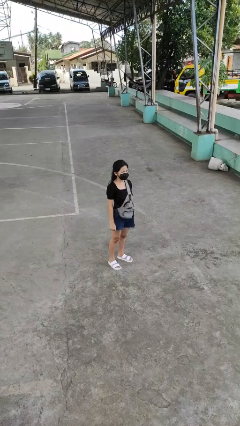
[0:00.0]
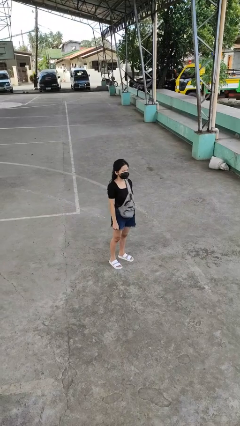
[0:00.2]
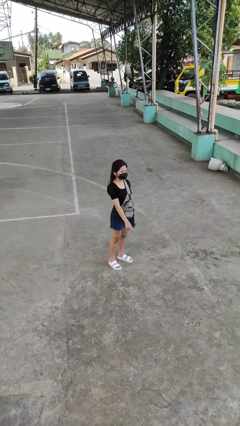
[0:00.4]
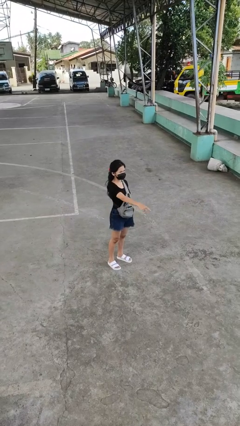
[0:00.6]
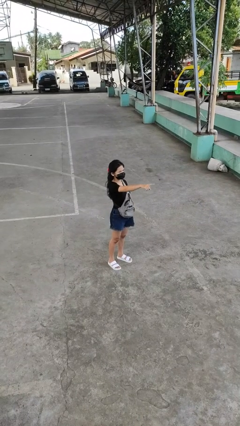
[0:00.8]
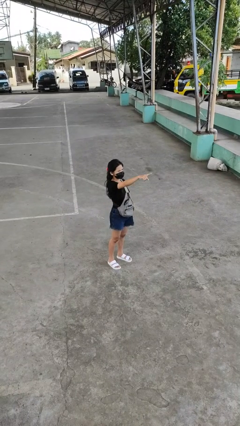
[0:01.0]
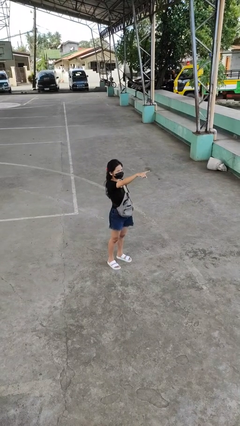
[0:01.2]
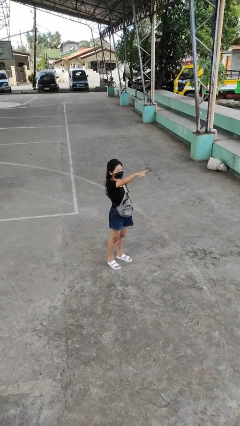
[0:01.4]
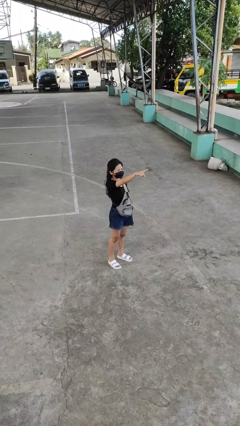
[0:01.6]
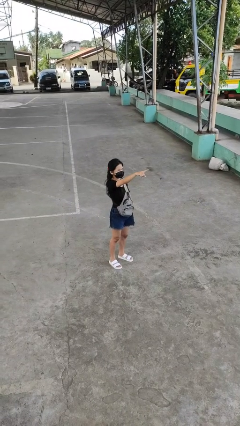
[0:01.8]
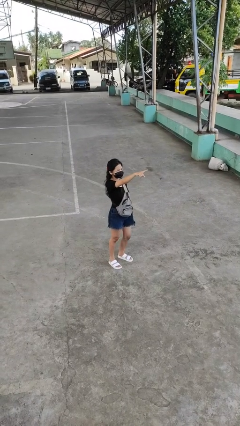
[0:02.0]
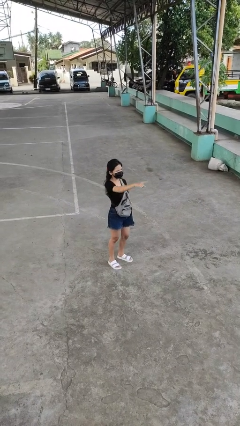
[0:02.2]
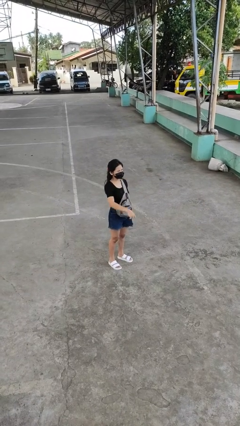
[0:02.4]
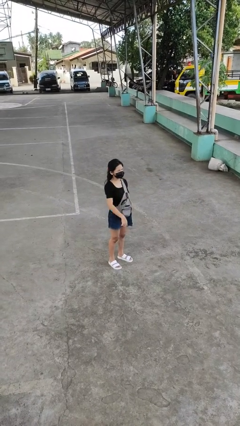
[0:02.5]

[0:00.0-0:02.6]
person points at person

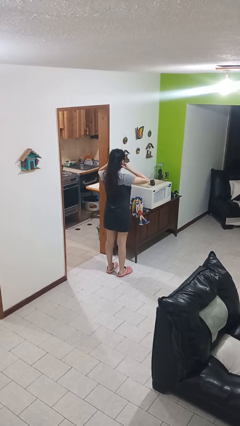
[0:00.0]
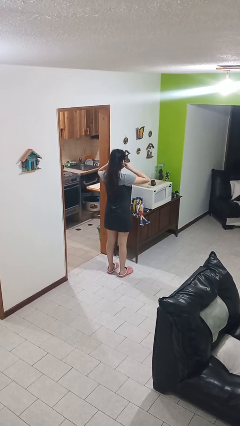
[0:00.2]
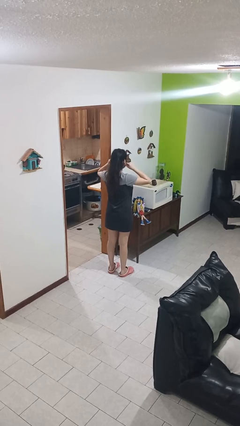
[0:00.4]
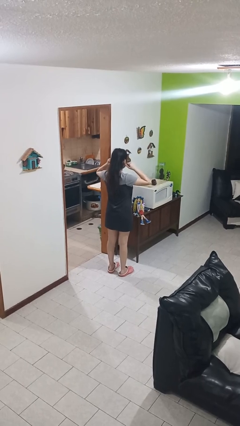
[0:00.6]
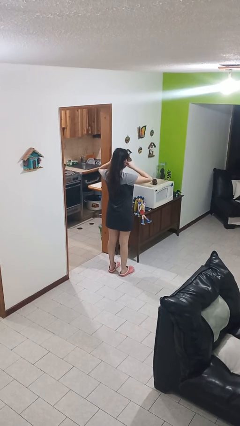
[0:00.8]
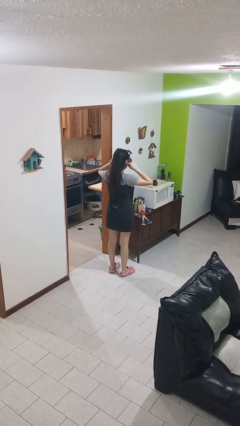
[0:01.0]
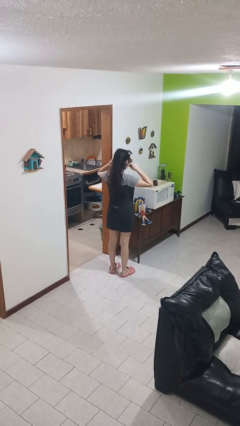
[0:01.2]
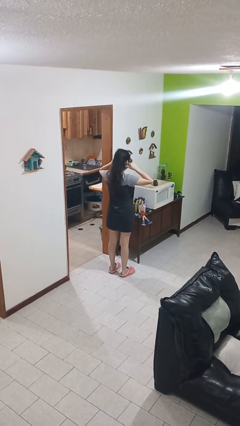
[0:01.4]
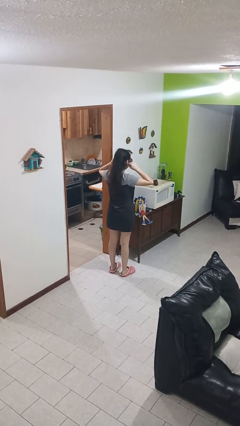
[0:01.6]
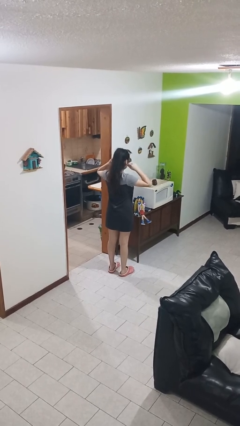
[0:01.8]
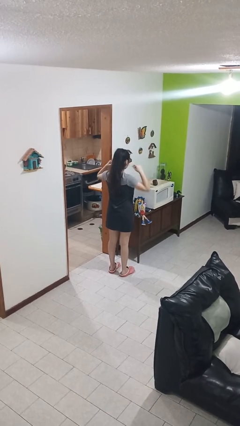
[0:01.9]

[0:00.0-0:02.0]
person touches earlobe

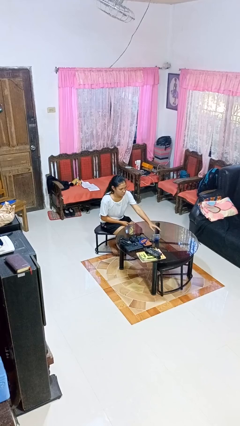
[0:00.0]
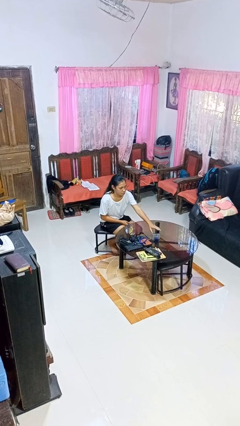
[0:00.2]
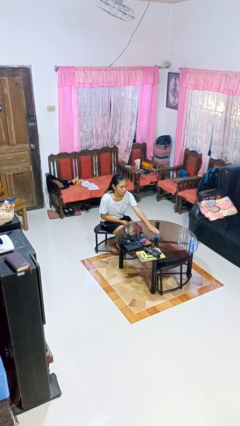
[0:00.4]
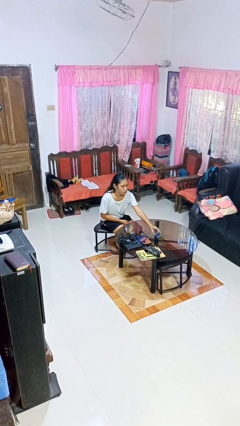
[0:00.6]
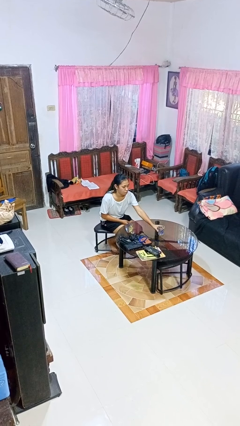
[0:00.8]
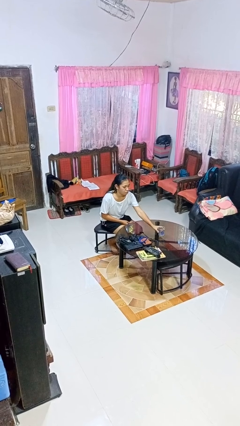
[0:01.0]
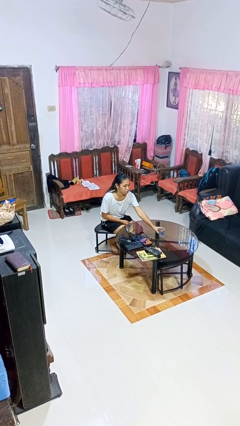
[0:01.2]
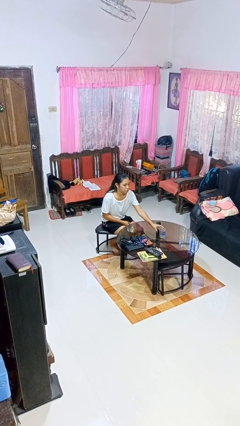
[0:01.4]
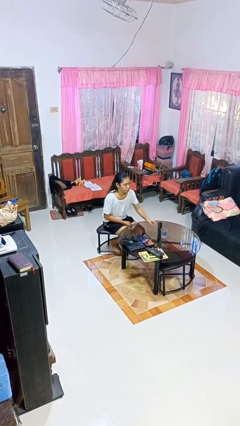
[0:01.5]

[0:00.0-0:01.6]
person sets upright glass

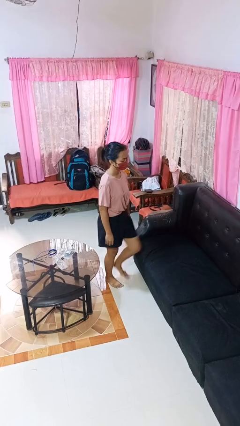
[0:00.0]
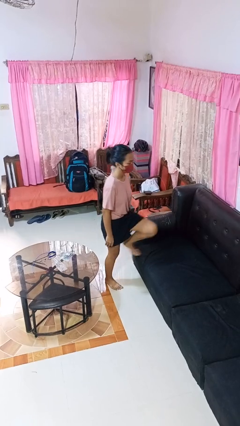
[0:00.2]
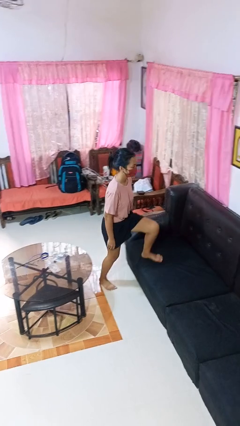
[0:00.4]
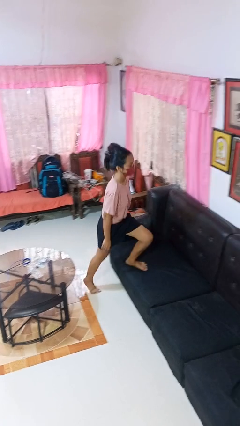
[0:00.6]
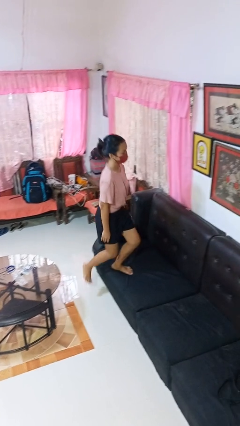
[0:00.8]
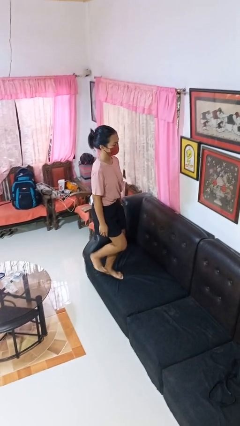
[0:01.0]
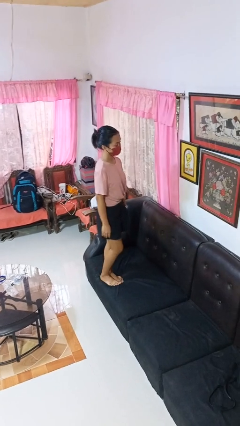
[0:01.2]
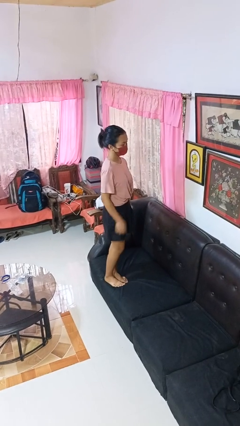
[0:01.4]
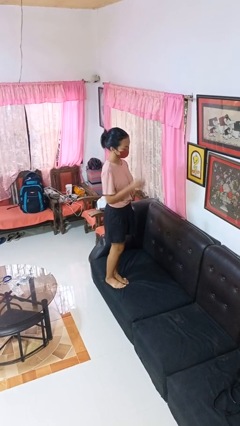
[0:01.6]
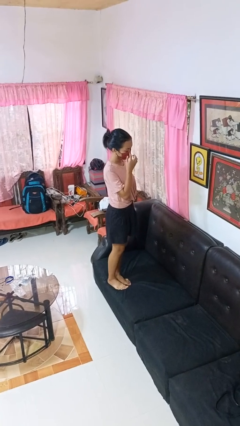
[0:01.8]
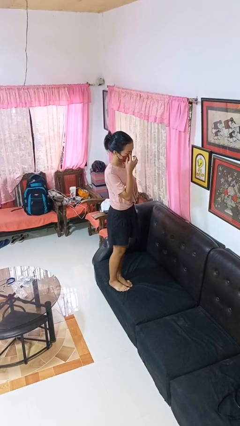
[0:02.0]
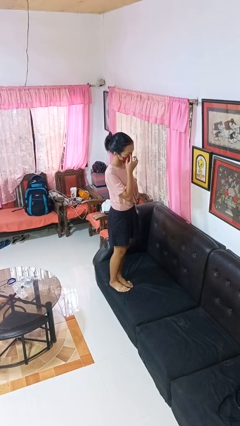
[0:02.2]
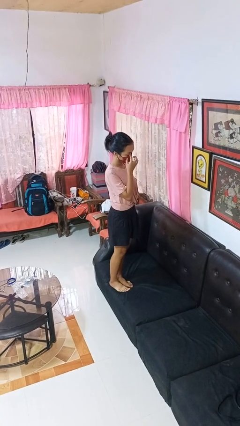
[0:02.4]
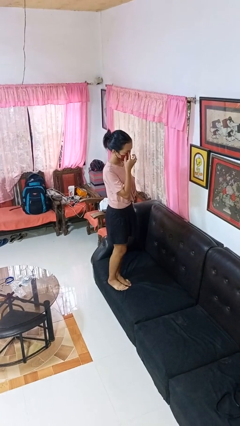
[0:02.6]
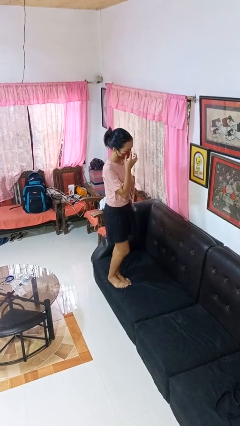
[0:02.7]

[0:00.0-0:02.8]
person climbs on couch

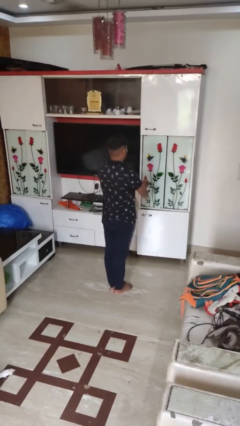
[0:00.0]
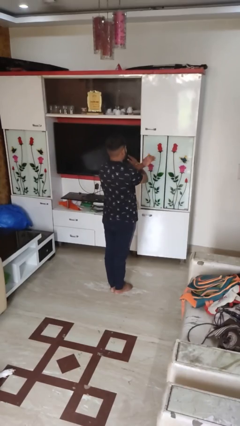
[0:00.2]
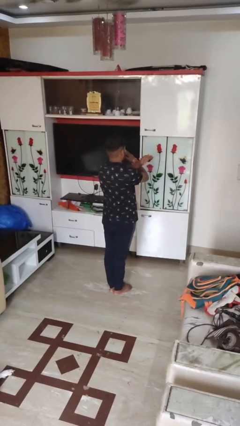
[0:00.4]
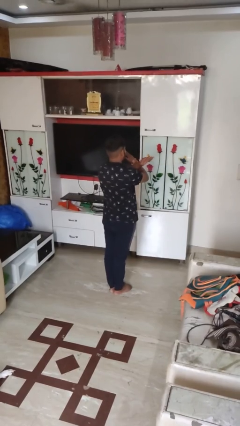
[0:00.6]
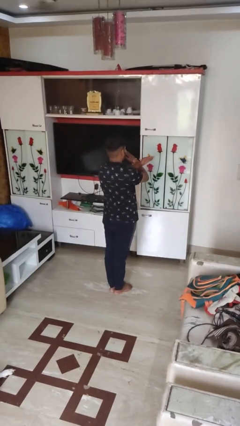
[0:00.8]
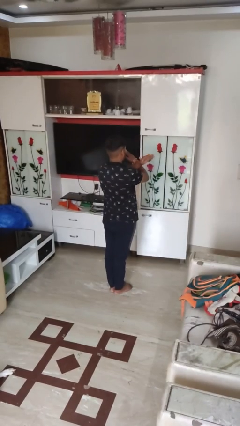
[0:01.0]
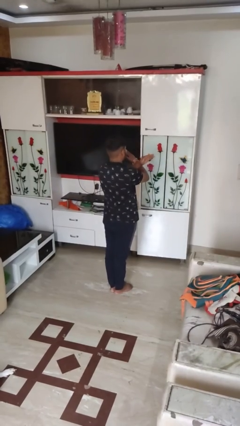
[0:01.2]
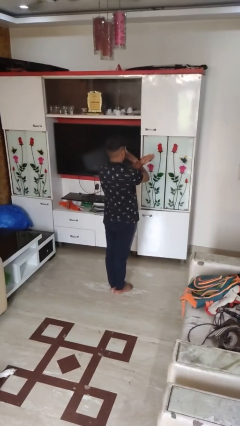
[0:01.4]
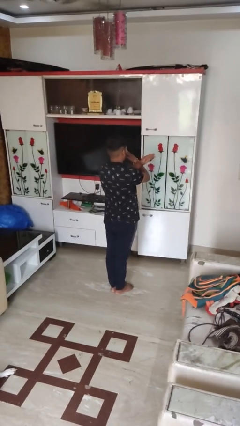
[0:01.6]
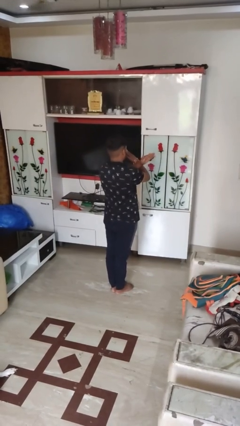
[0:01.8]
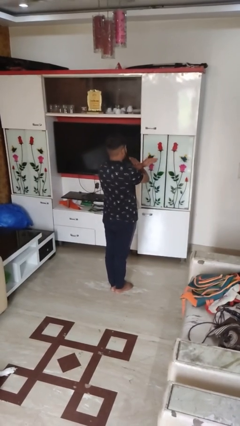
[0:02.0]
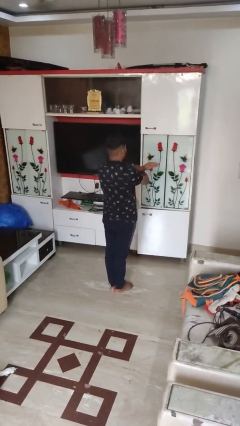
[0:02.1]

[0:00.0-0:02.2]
person gestures arms x

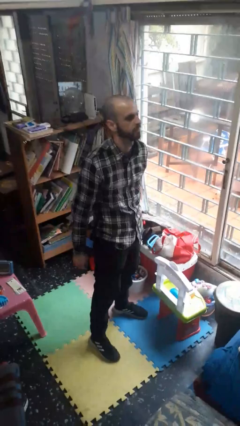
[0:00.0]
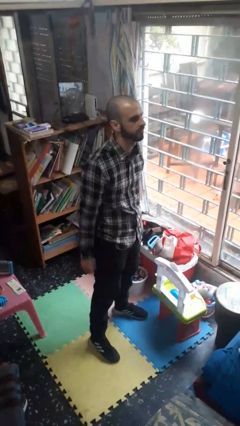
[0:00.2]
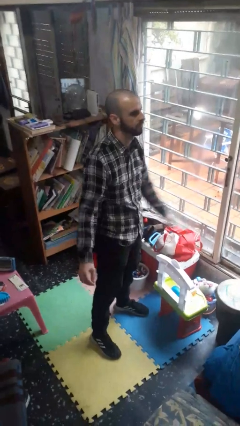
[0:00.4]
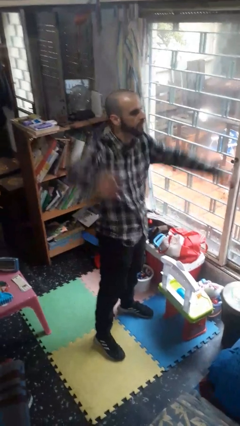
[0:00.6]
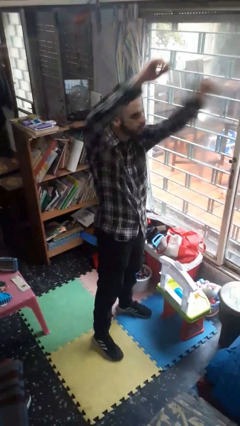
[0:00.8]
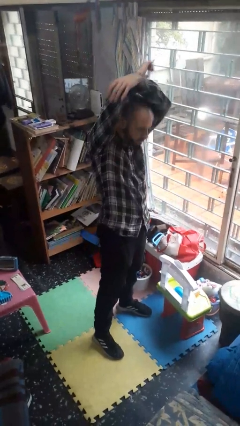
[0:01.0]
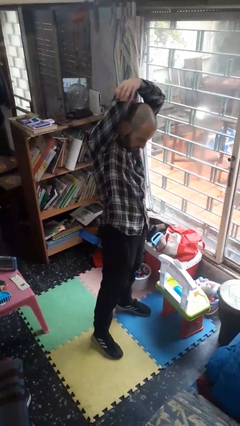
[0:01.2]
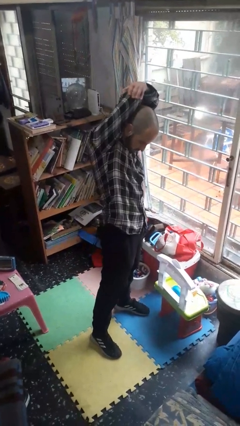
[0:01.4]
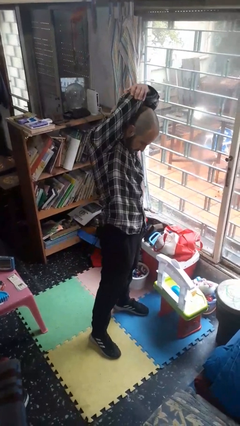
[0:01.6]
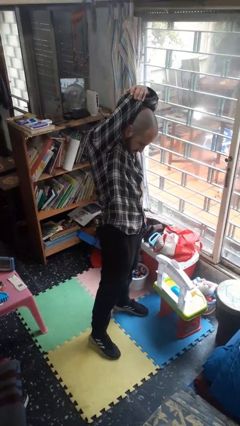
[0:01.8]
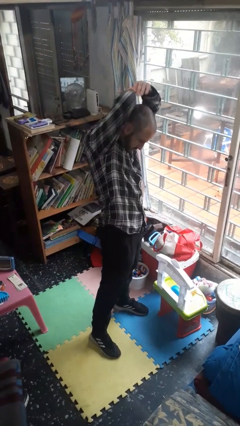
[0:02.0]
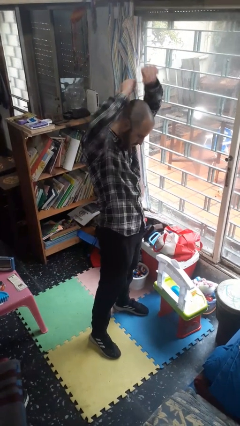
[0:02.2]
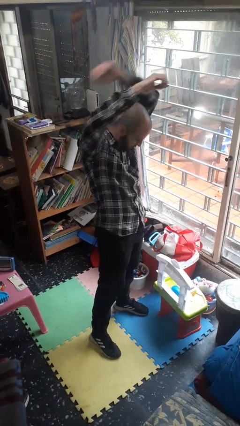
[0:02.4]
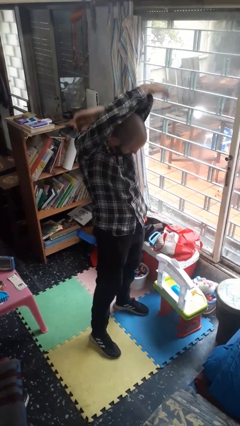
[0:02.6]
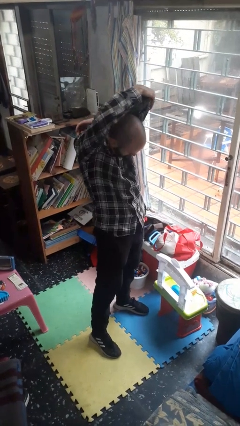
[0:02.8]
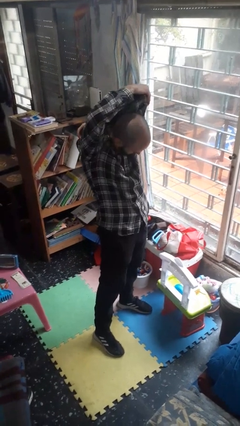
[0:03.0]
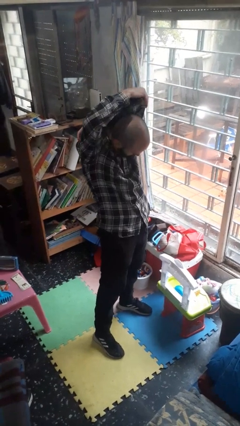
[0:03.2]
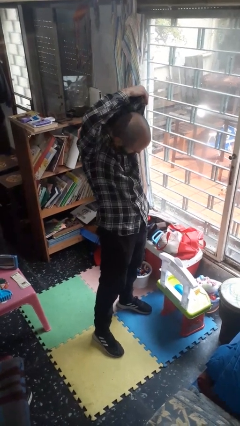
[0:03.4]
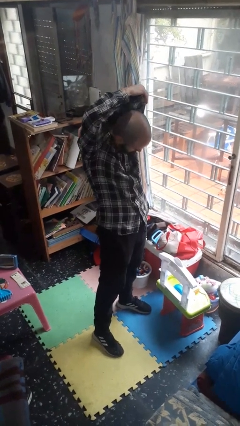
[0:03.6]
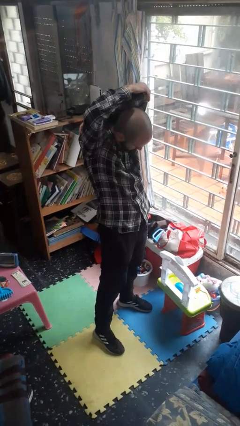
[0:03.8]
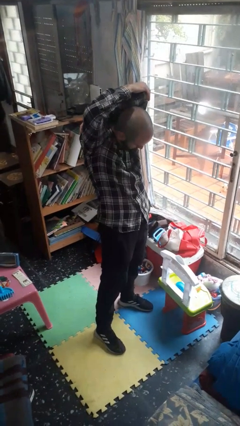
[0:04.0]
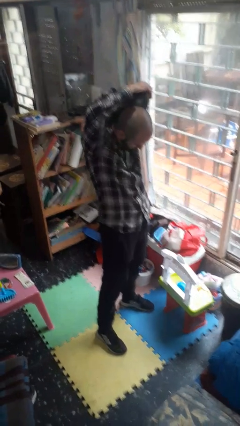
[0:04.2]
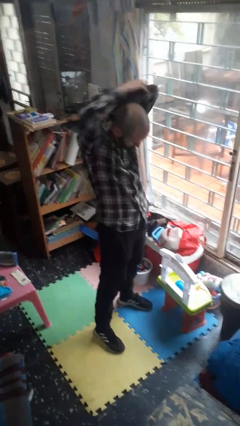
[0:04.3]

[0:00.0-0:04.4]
person stretches arms over head

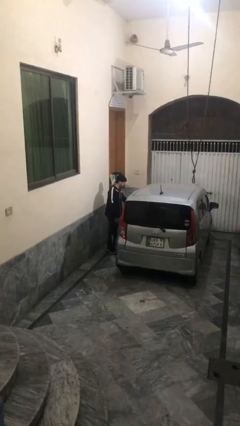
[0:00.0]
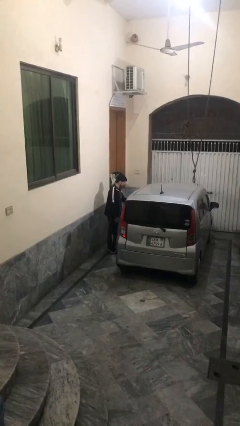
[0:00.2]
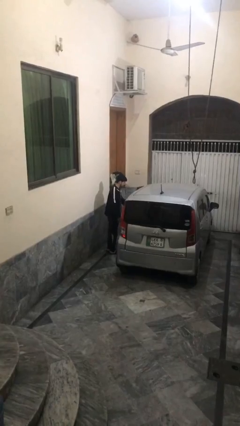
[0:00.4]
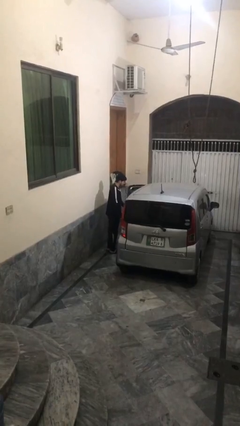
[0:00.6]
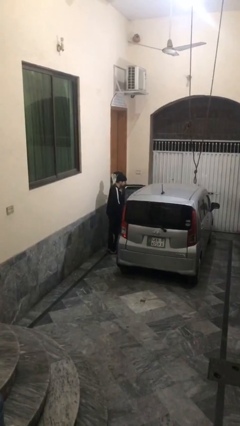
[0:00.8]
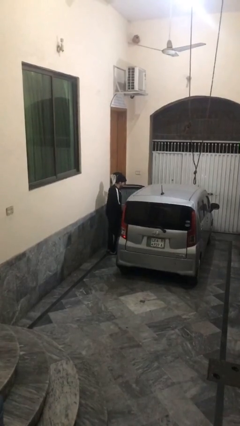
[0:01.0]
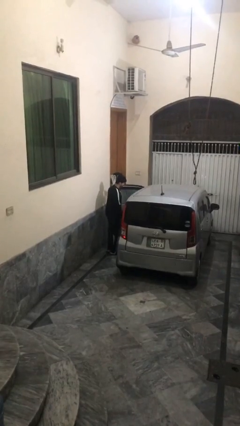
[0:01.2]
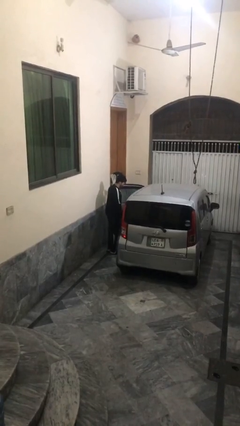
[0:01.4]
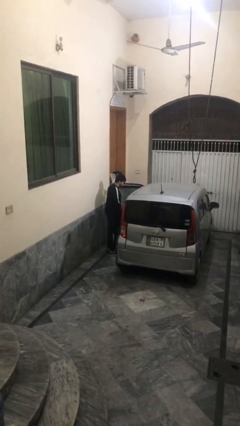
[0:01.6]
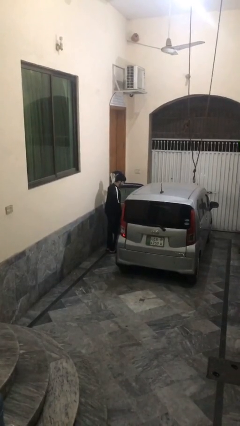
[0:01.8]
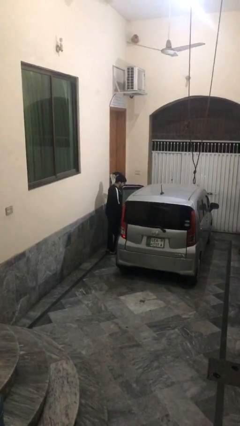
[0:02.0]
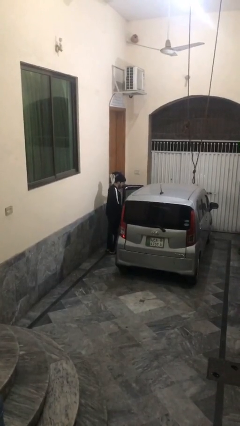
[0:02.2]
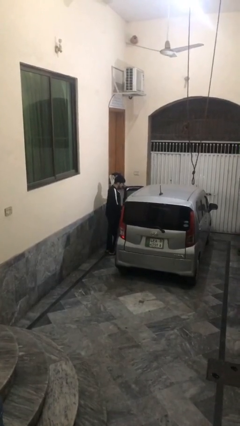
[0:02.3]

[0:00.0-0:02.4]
person opens car door
